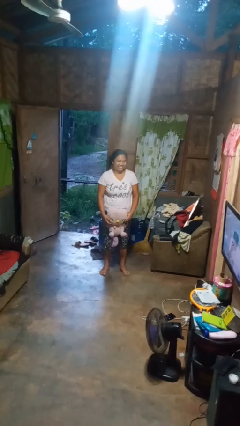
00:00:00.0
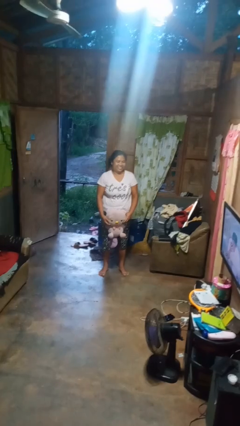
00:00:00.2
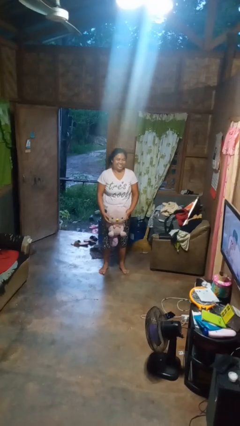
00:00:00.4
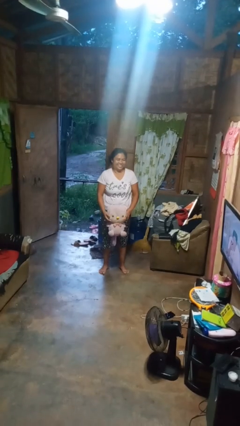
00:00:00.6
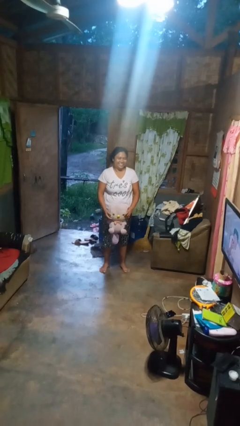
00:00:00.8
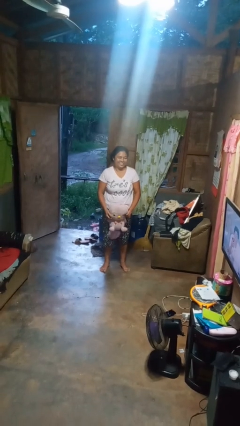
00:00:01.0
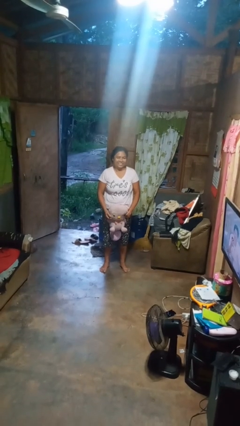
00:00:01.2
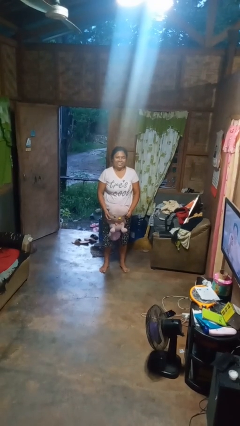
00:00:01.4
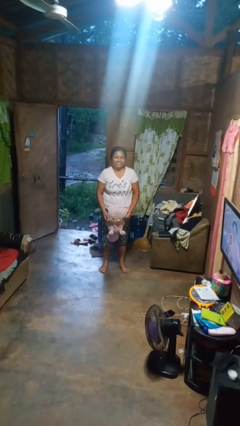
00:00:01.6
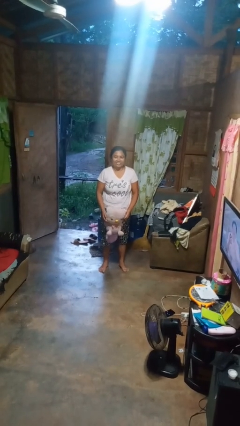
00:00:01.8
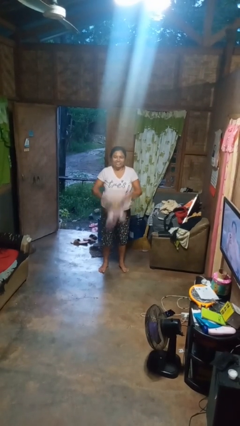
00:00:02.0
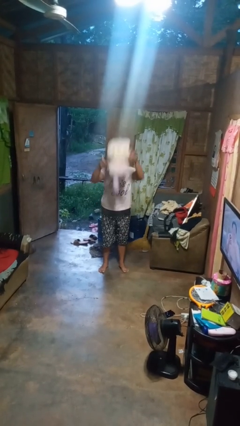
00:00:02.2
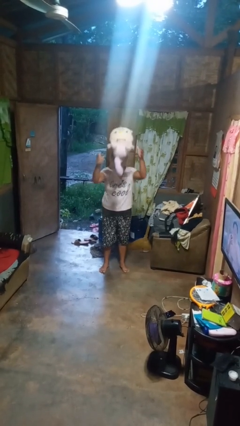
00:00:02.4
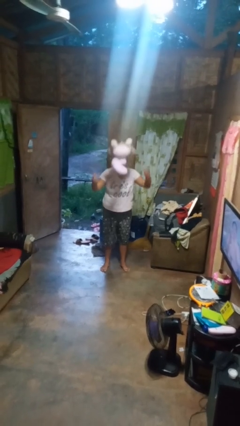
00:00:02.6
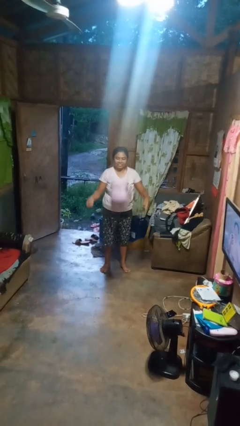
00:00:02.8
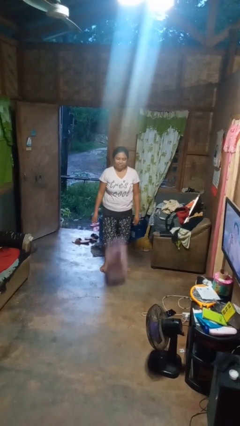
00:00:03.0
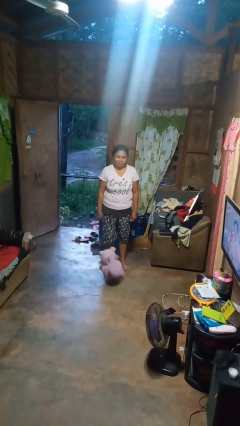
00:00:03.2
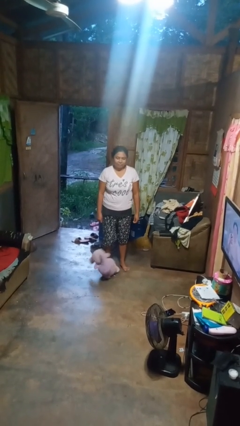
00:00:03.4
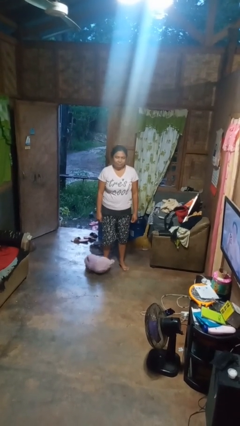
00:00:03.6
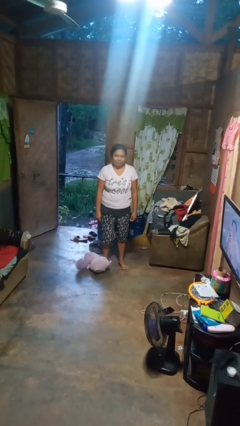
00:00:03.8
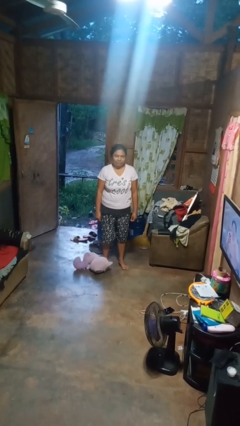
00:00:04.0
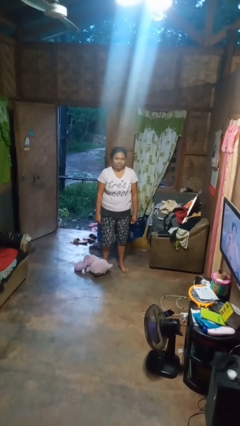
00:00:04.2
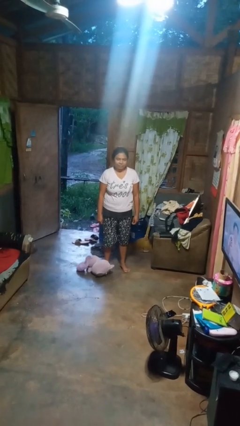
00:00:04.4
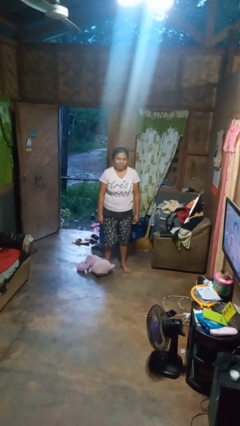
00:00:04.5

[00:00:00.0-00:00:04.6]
person throws object into air

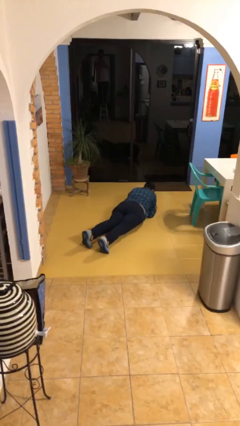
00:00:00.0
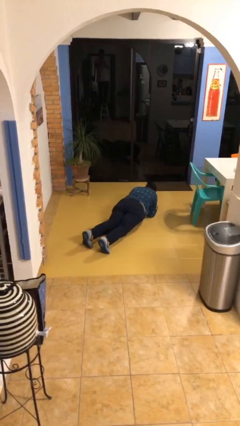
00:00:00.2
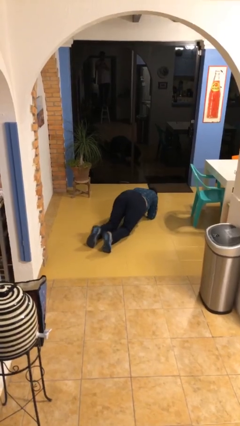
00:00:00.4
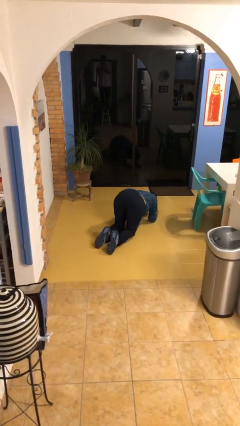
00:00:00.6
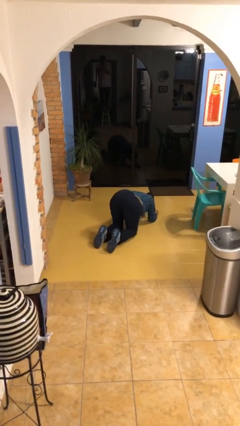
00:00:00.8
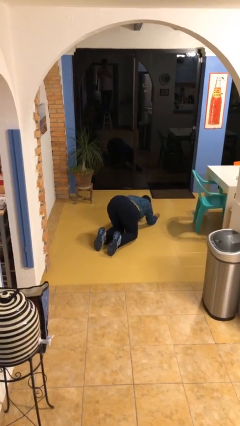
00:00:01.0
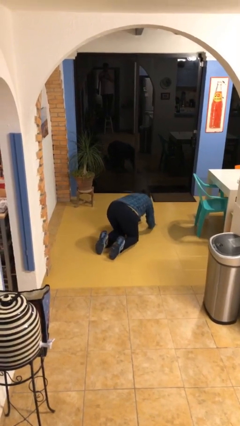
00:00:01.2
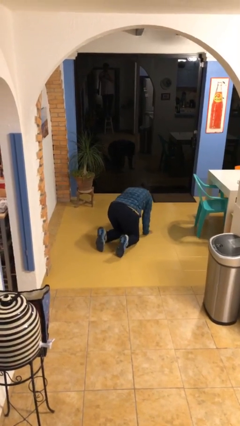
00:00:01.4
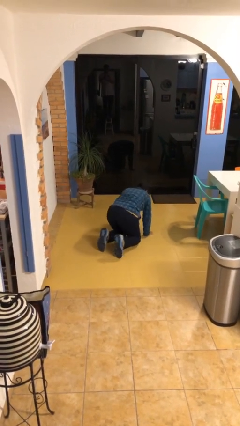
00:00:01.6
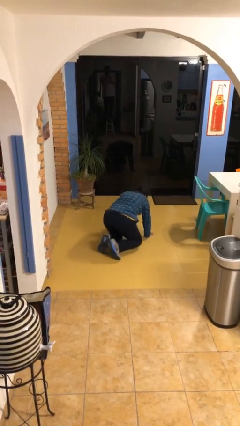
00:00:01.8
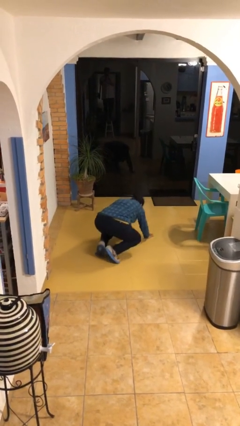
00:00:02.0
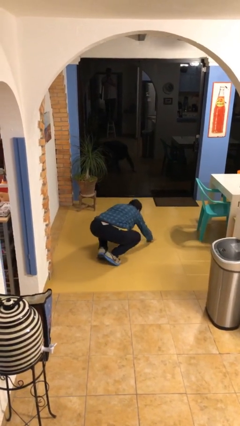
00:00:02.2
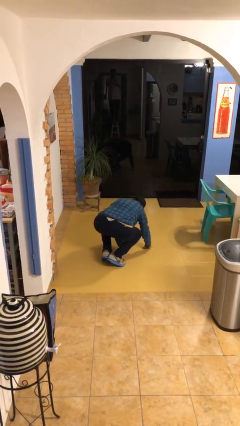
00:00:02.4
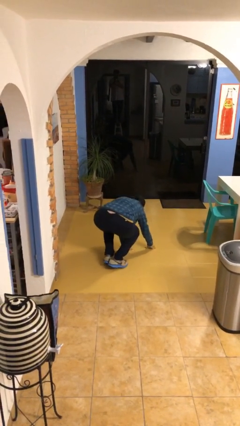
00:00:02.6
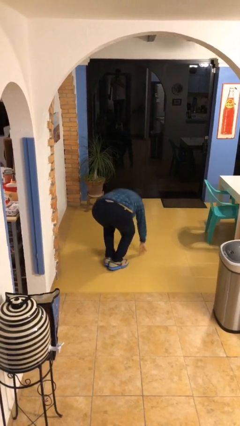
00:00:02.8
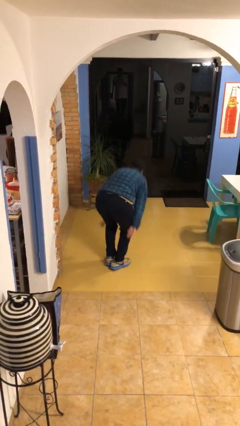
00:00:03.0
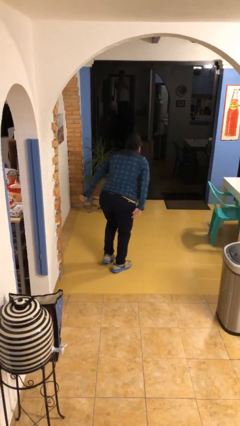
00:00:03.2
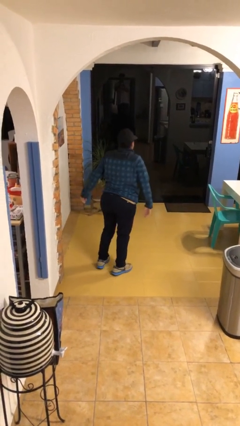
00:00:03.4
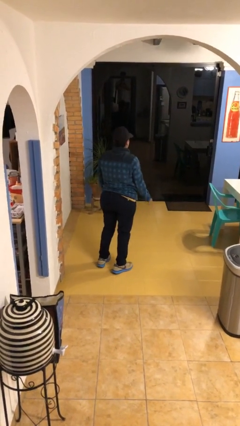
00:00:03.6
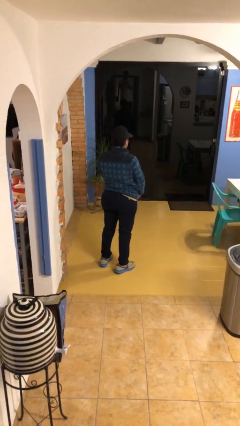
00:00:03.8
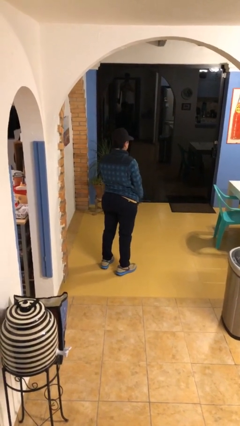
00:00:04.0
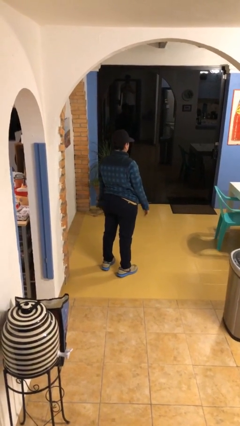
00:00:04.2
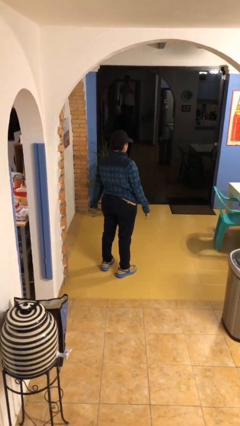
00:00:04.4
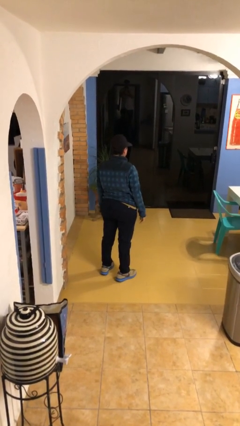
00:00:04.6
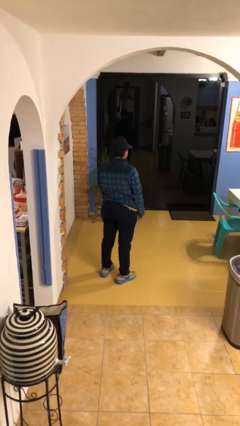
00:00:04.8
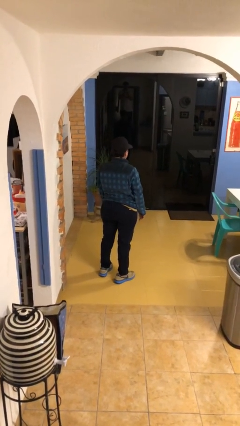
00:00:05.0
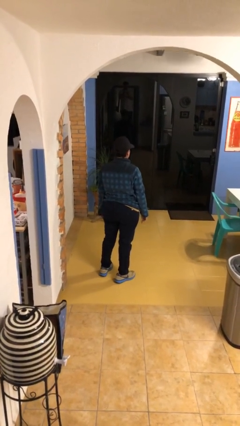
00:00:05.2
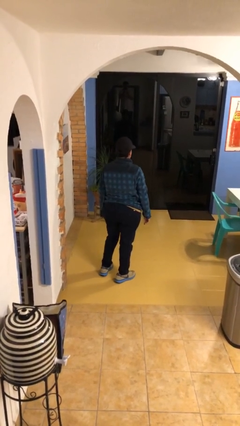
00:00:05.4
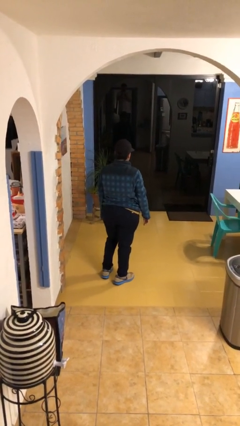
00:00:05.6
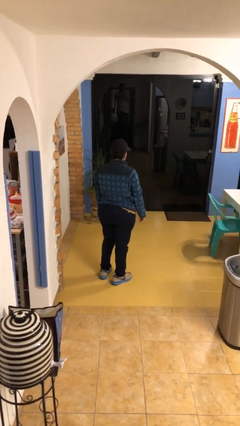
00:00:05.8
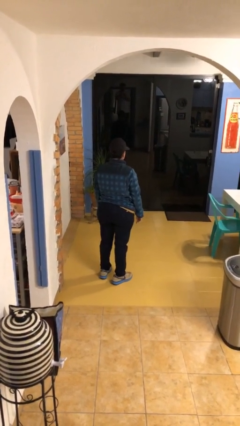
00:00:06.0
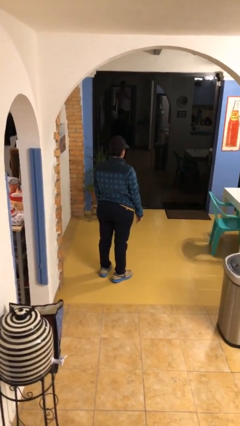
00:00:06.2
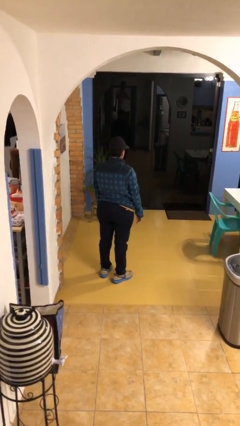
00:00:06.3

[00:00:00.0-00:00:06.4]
person stands up from floor

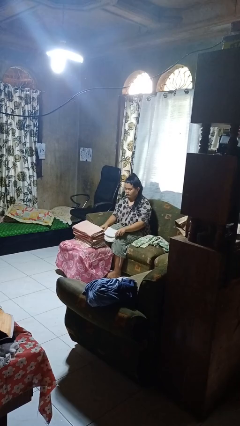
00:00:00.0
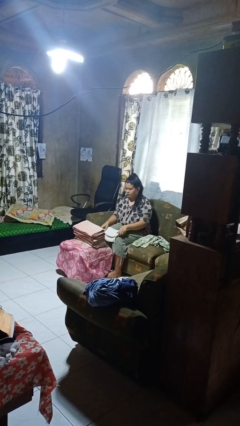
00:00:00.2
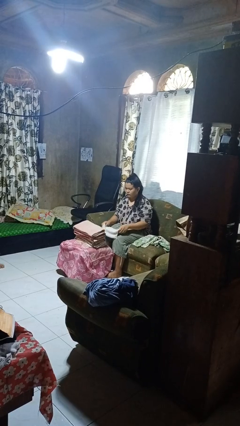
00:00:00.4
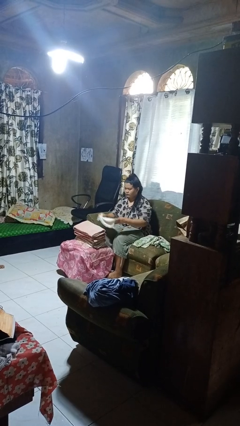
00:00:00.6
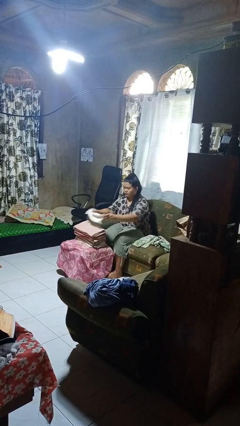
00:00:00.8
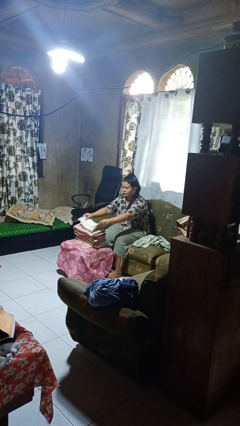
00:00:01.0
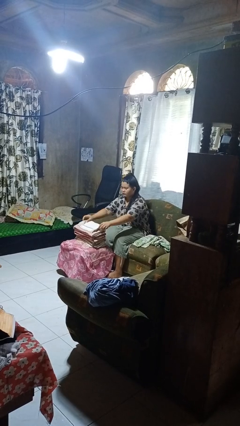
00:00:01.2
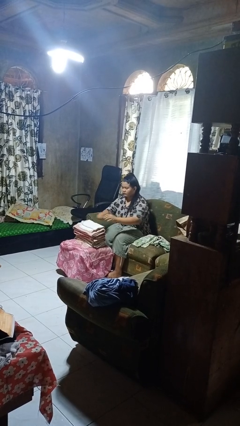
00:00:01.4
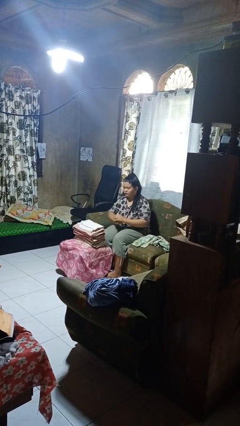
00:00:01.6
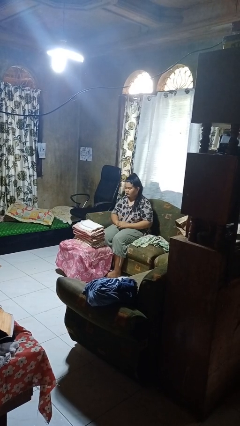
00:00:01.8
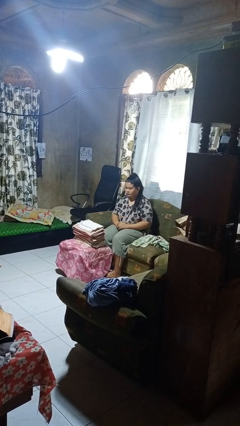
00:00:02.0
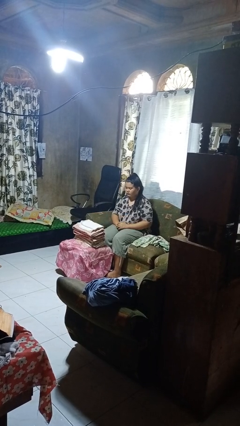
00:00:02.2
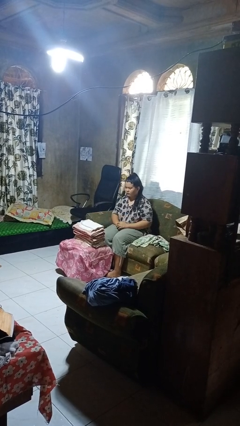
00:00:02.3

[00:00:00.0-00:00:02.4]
person folds towel

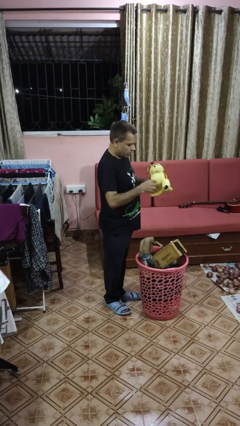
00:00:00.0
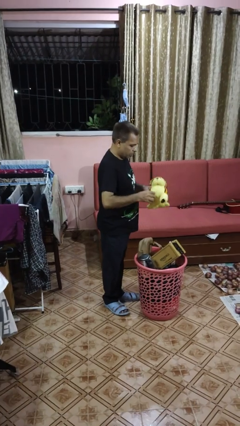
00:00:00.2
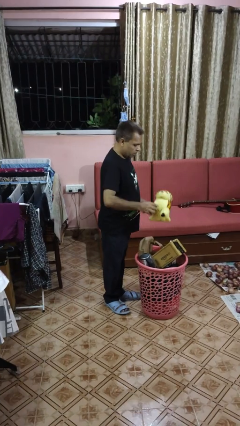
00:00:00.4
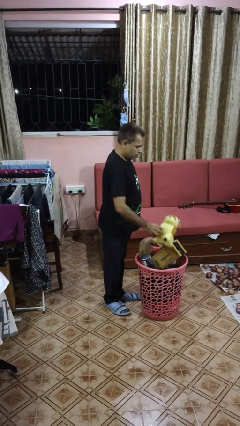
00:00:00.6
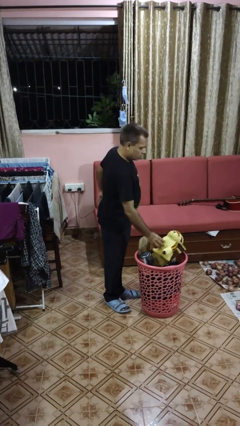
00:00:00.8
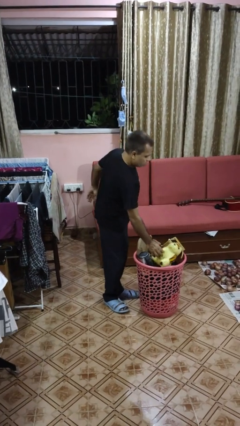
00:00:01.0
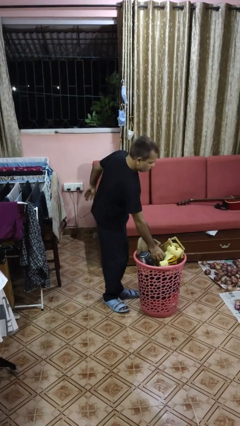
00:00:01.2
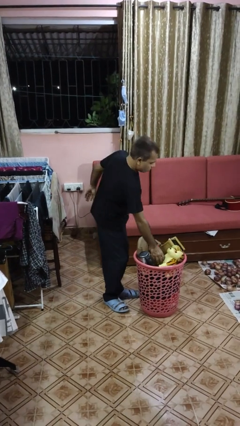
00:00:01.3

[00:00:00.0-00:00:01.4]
person puts object into basket

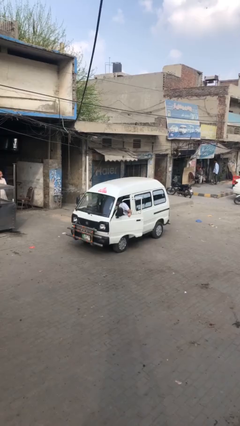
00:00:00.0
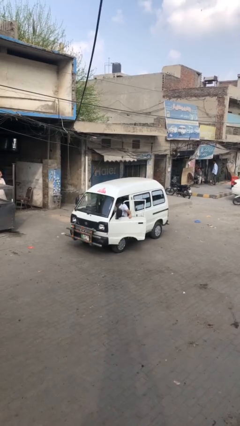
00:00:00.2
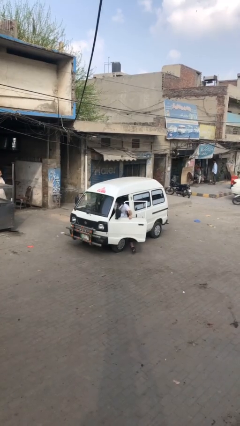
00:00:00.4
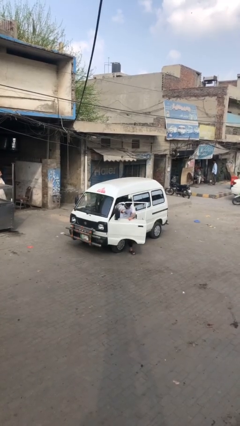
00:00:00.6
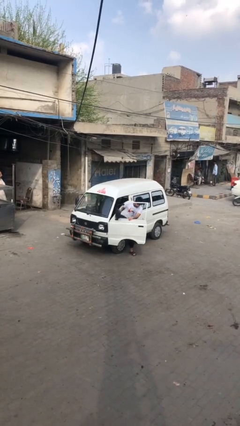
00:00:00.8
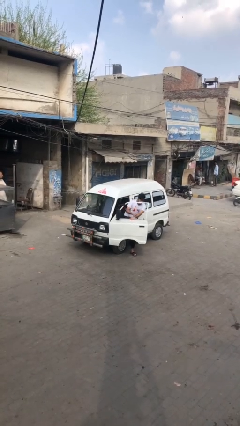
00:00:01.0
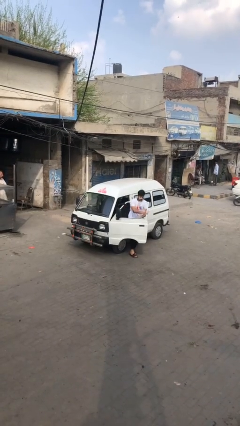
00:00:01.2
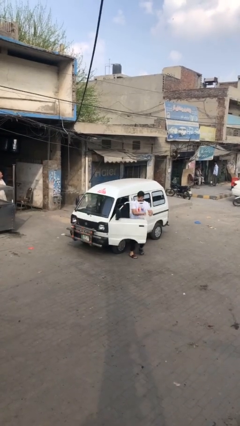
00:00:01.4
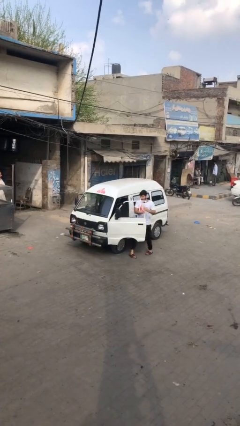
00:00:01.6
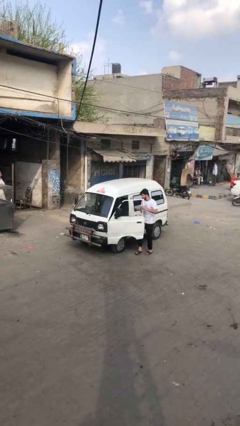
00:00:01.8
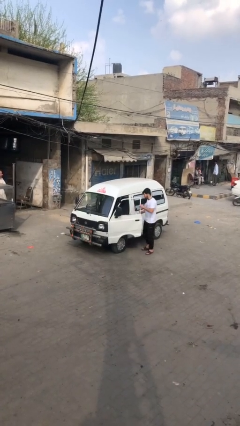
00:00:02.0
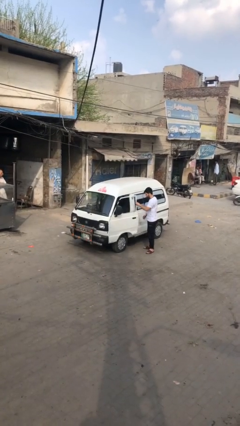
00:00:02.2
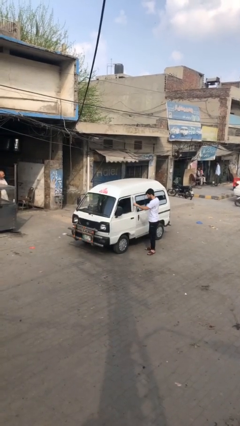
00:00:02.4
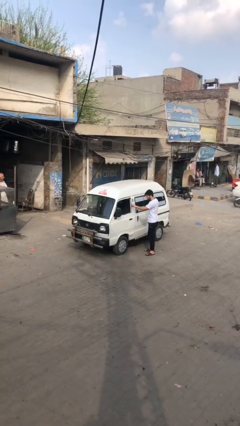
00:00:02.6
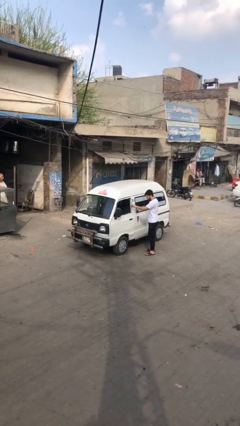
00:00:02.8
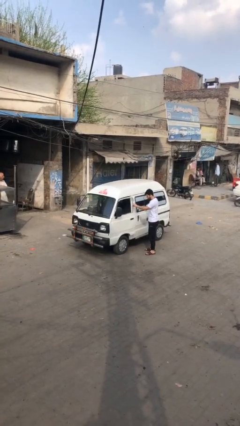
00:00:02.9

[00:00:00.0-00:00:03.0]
car drops off person
